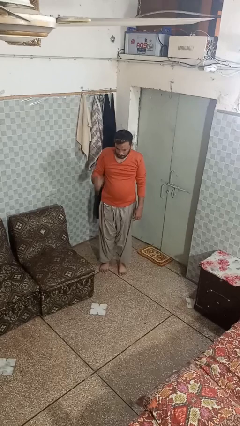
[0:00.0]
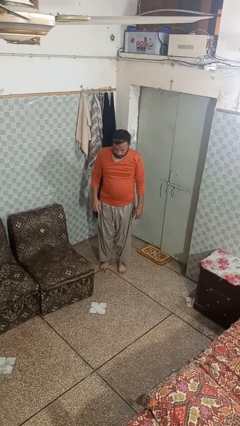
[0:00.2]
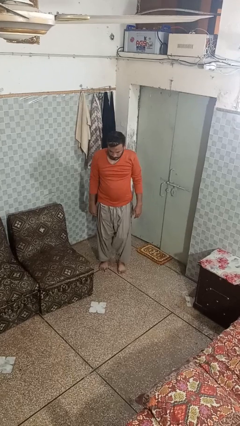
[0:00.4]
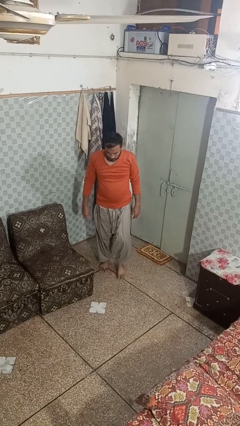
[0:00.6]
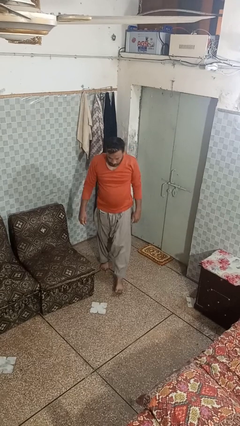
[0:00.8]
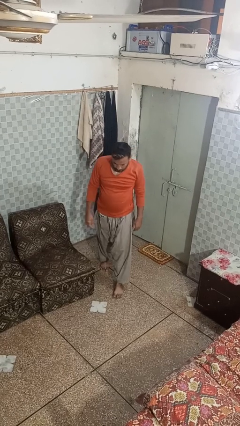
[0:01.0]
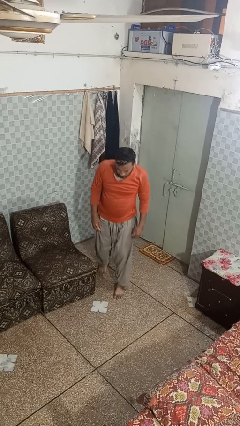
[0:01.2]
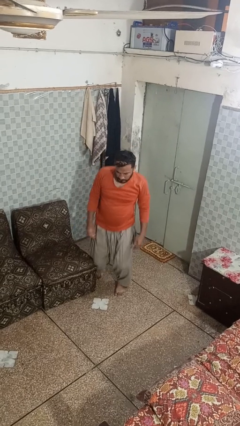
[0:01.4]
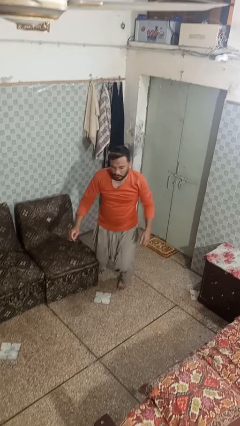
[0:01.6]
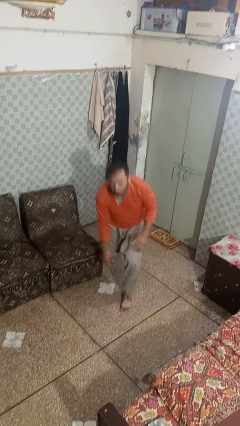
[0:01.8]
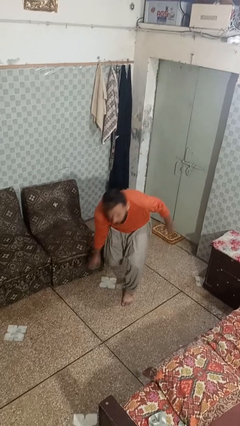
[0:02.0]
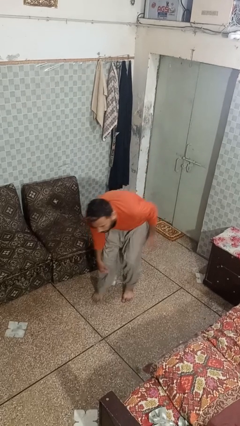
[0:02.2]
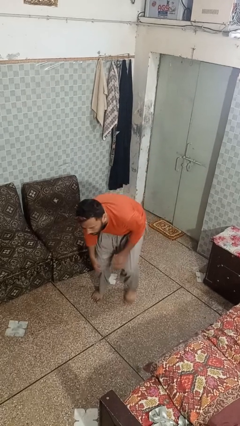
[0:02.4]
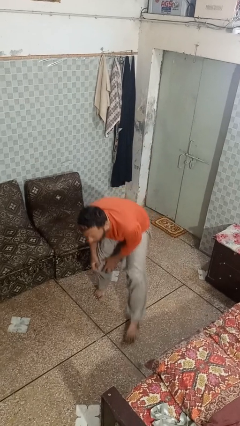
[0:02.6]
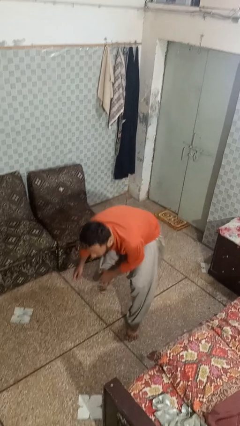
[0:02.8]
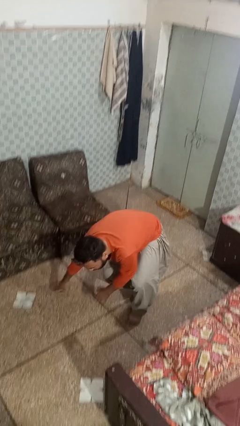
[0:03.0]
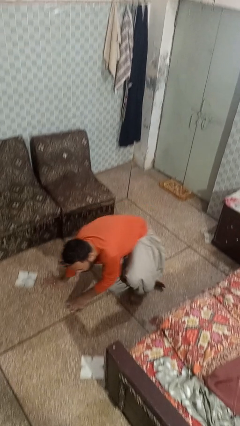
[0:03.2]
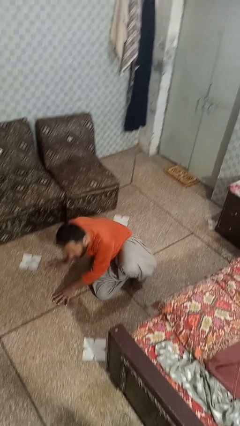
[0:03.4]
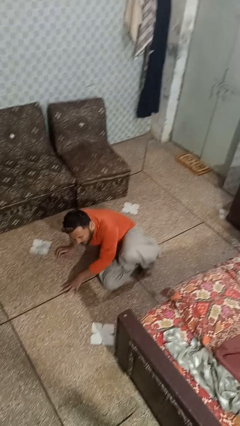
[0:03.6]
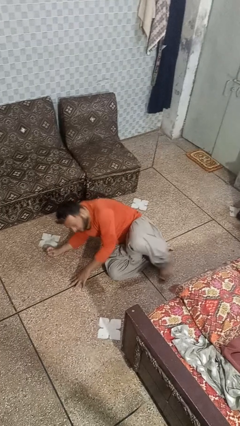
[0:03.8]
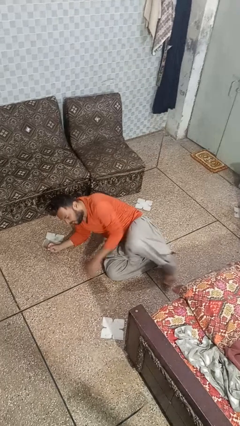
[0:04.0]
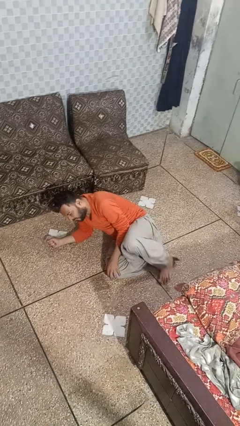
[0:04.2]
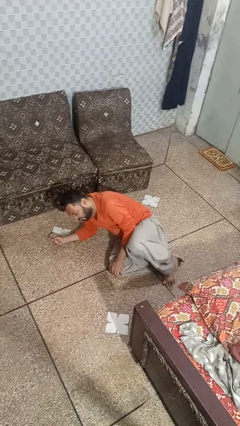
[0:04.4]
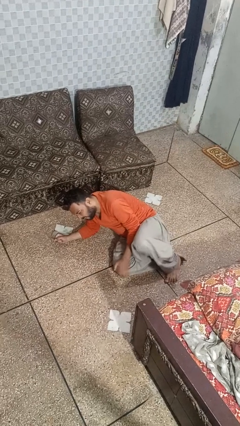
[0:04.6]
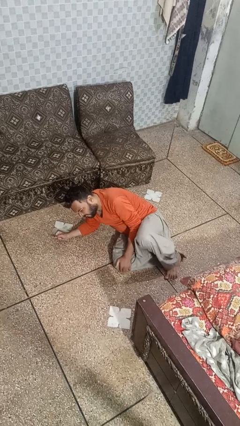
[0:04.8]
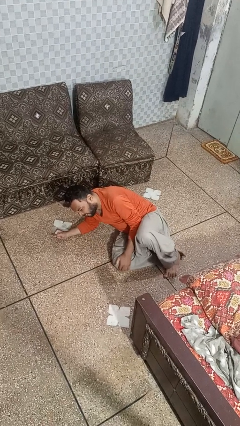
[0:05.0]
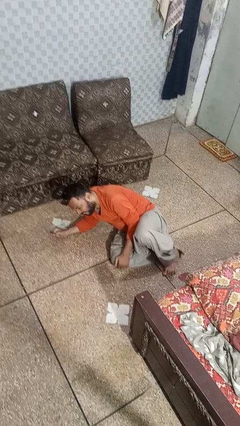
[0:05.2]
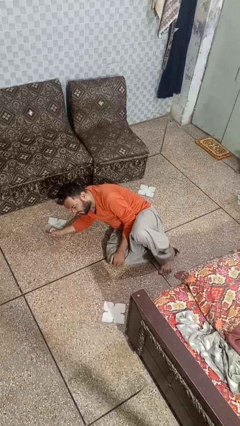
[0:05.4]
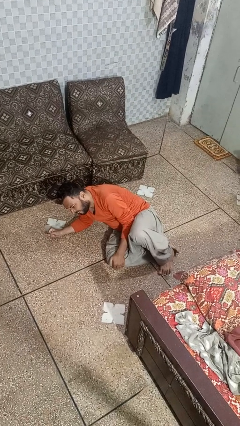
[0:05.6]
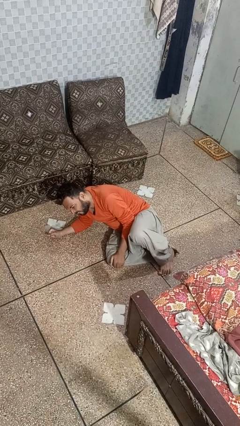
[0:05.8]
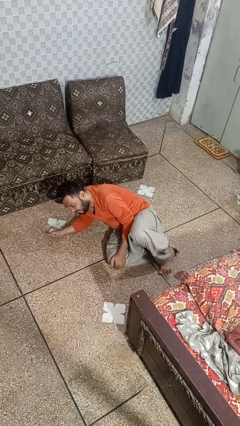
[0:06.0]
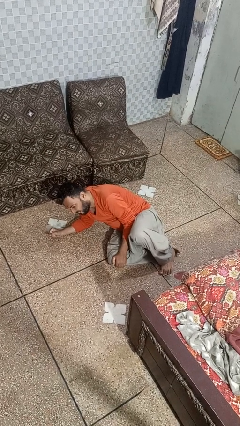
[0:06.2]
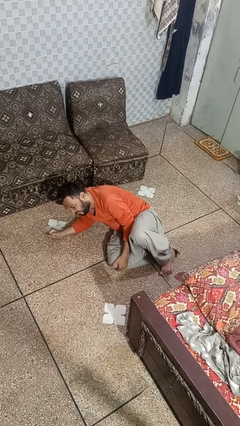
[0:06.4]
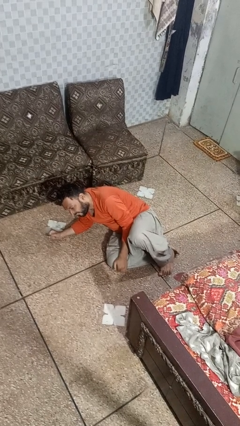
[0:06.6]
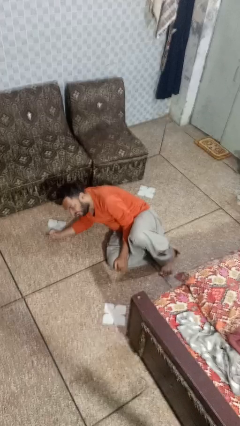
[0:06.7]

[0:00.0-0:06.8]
person trips on object on floor

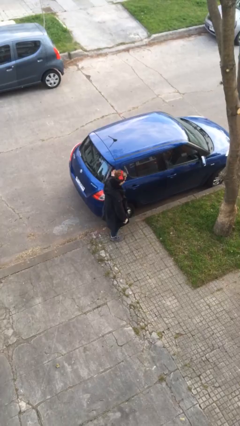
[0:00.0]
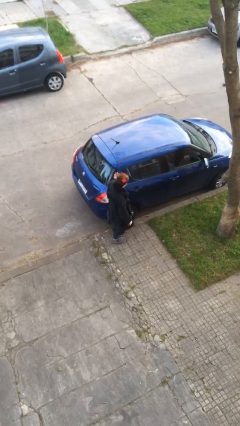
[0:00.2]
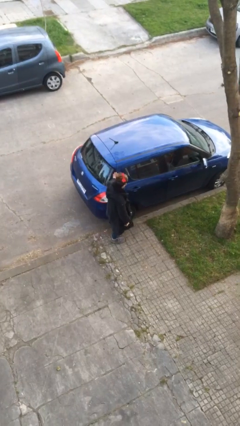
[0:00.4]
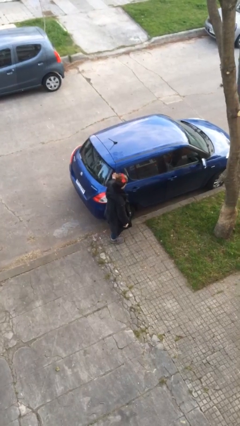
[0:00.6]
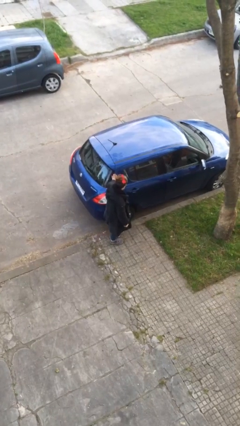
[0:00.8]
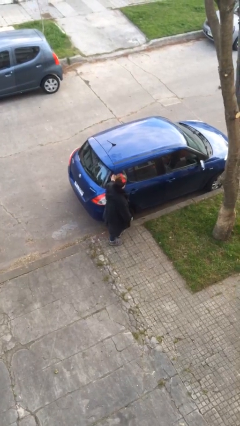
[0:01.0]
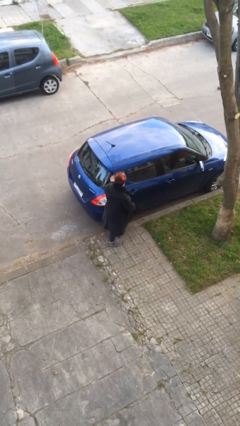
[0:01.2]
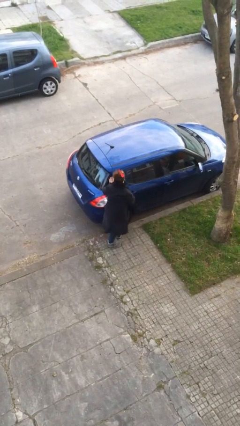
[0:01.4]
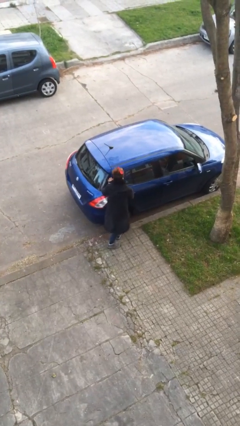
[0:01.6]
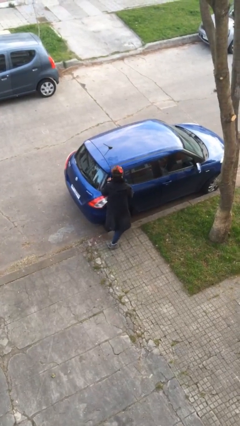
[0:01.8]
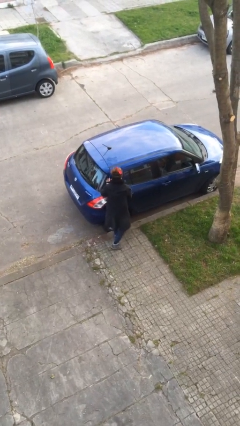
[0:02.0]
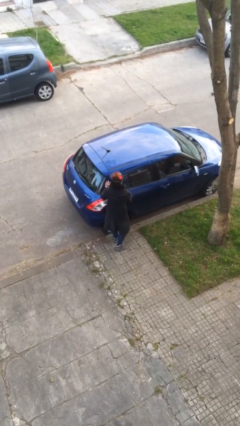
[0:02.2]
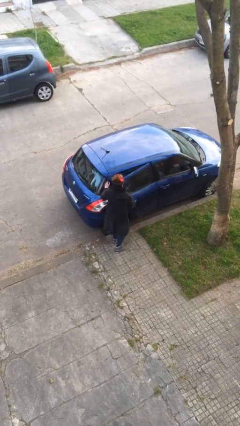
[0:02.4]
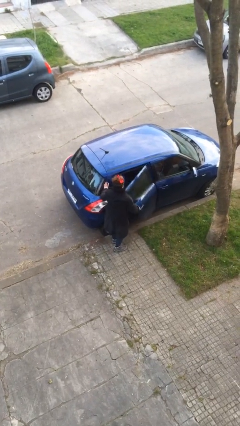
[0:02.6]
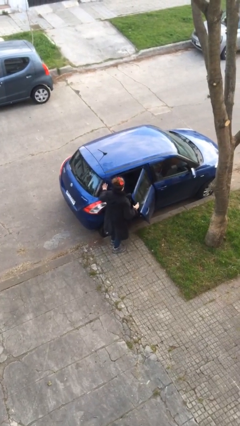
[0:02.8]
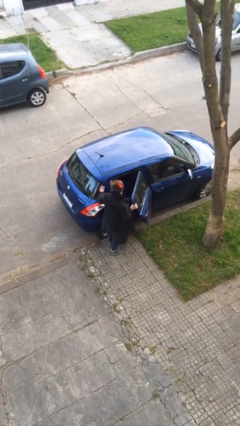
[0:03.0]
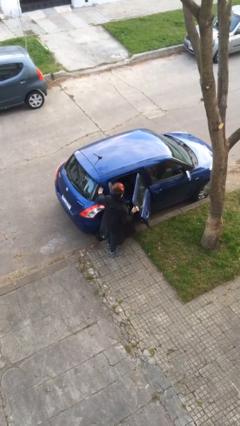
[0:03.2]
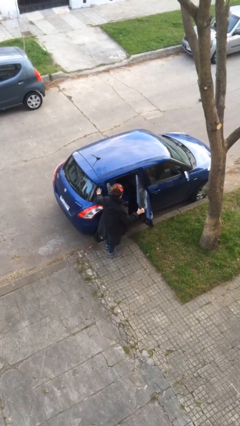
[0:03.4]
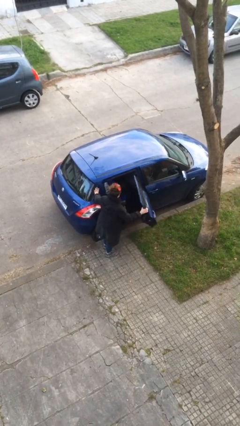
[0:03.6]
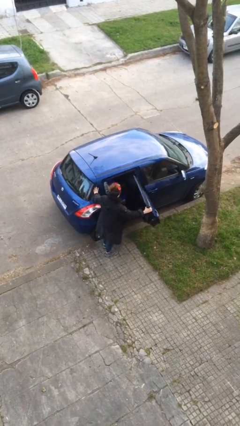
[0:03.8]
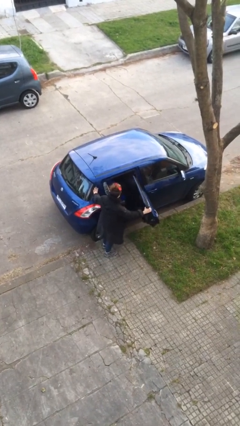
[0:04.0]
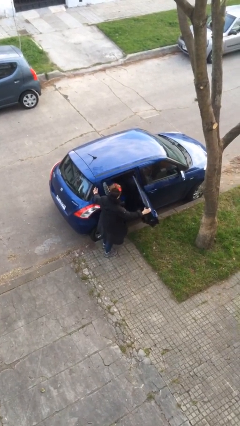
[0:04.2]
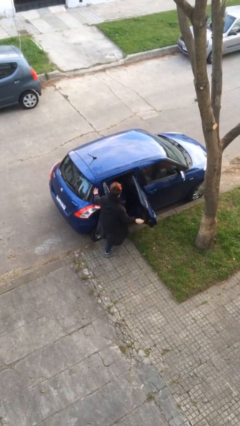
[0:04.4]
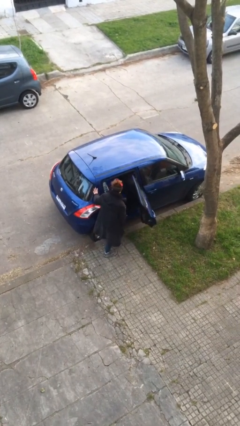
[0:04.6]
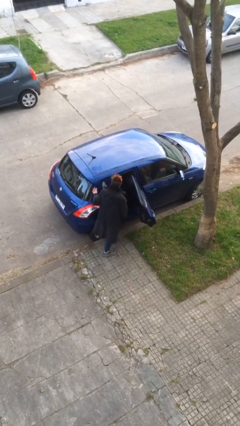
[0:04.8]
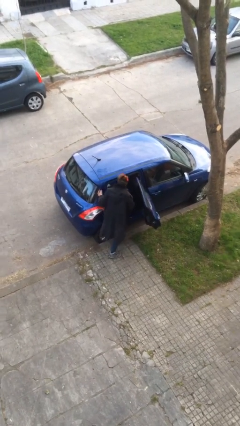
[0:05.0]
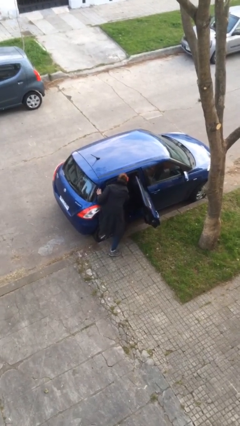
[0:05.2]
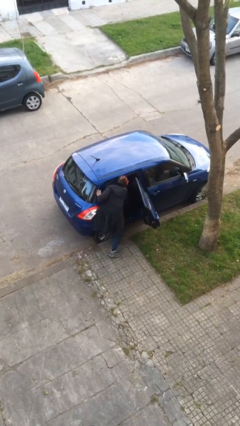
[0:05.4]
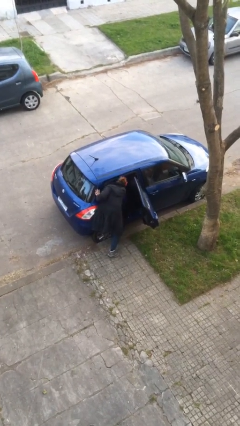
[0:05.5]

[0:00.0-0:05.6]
person opens car door

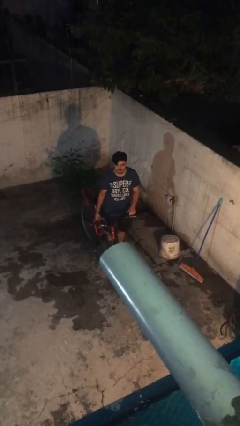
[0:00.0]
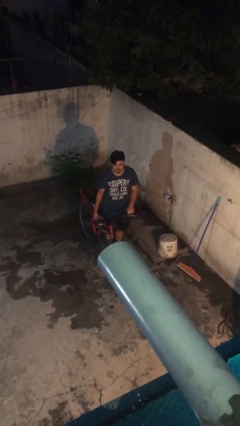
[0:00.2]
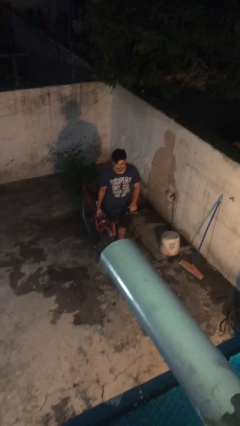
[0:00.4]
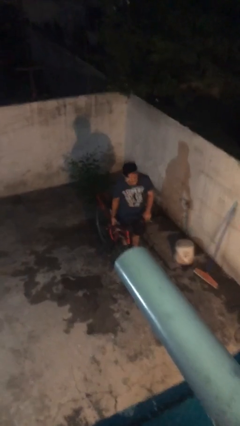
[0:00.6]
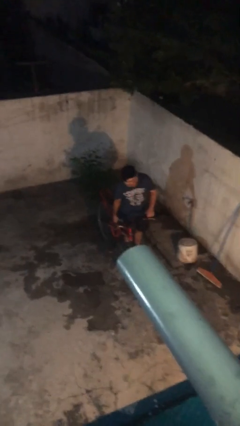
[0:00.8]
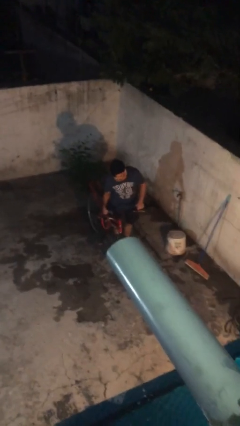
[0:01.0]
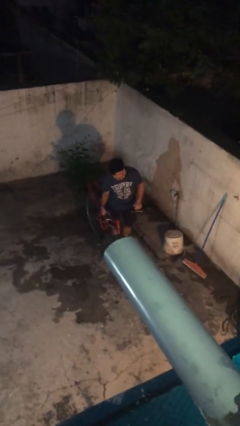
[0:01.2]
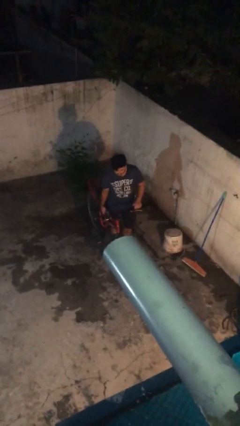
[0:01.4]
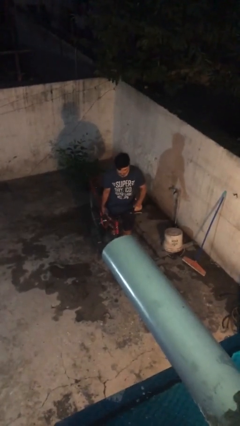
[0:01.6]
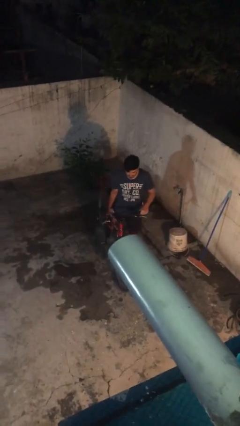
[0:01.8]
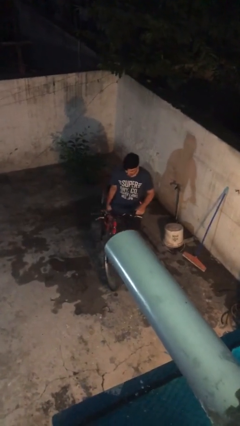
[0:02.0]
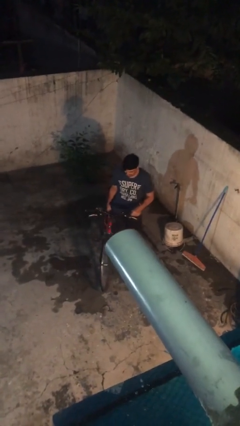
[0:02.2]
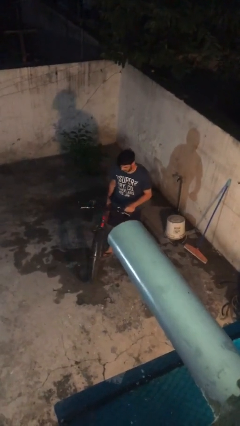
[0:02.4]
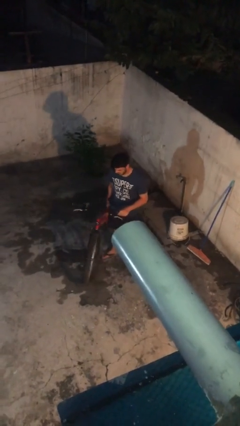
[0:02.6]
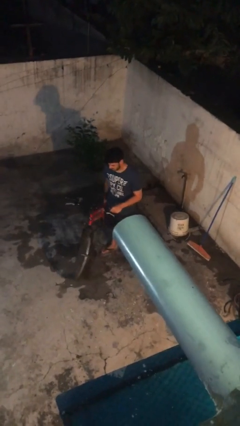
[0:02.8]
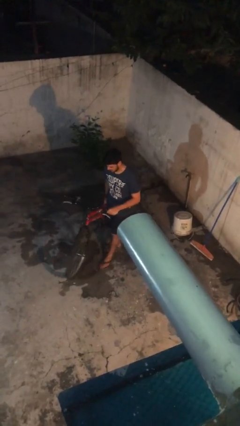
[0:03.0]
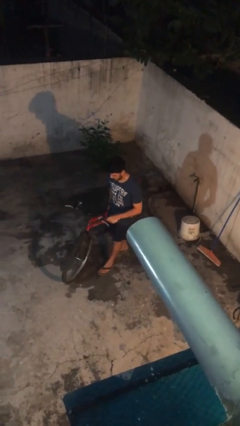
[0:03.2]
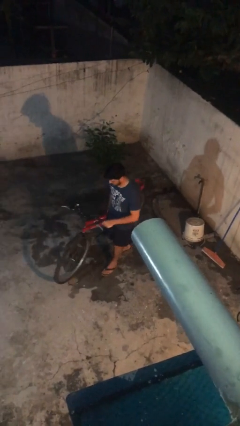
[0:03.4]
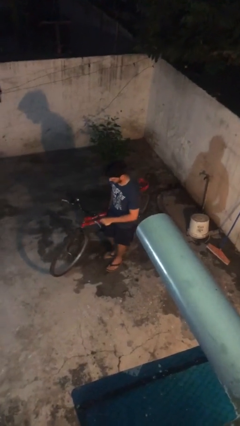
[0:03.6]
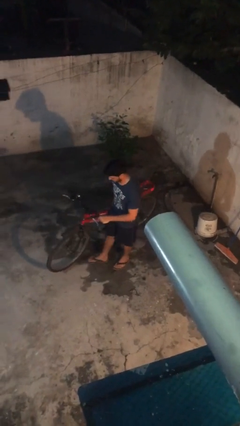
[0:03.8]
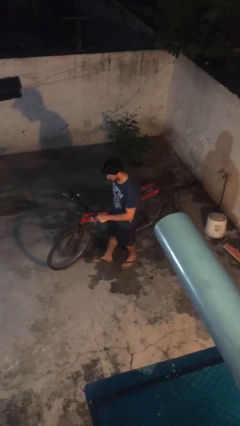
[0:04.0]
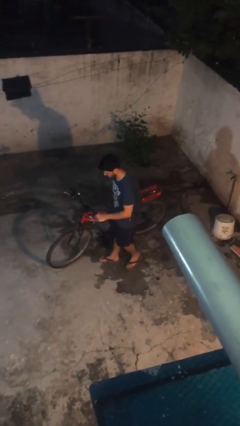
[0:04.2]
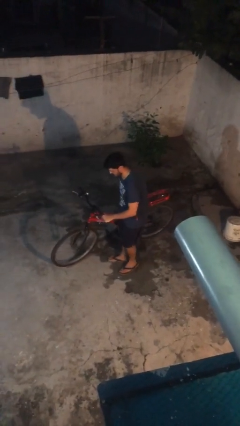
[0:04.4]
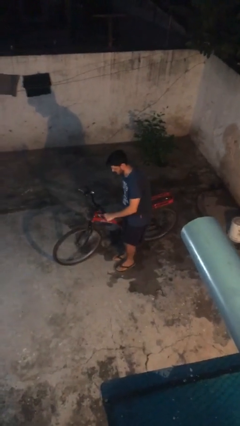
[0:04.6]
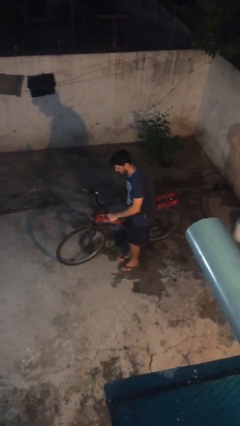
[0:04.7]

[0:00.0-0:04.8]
person carries bicycle

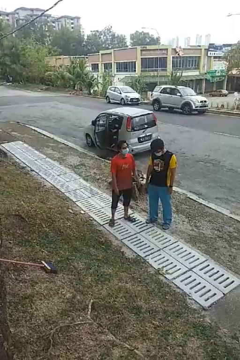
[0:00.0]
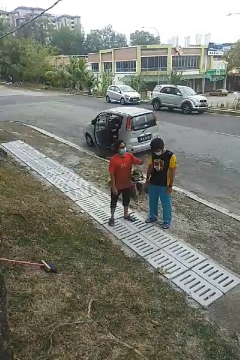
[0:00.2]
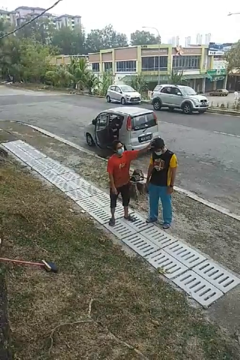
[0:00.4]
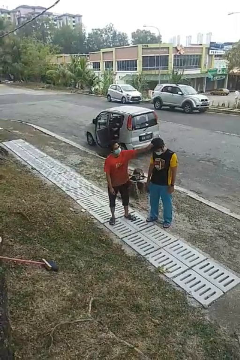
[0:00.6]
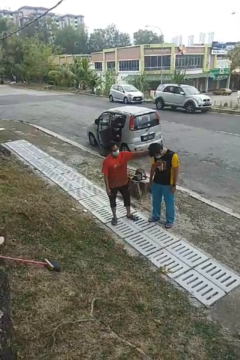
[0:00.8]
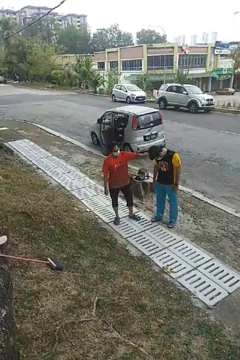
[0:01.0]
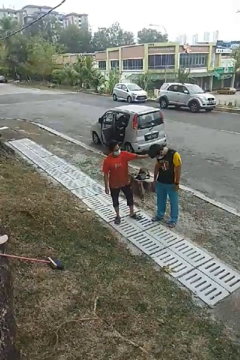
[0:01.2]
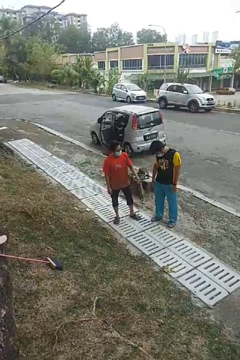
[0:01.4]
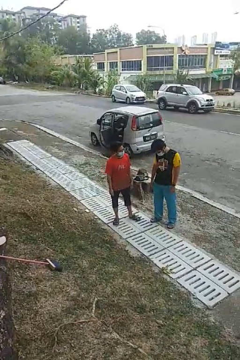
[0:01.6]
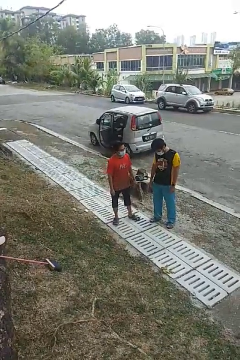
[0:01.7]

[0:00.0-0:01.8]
person grabs person by hair
